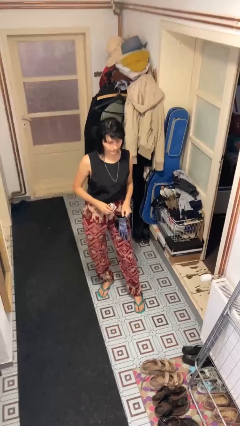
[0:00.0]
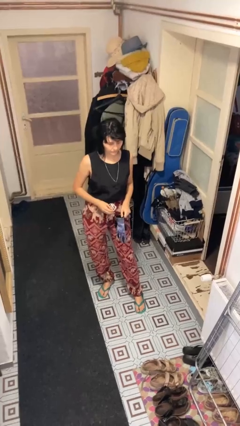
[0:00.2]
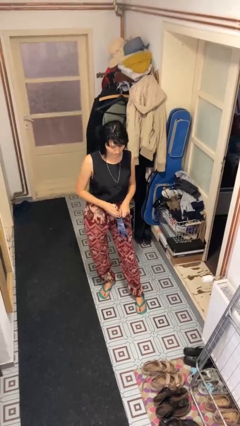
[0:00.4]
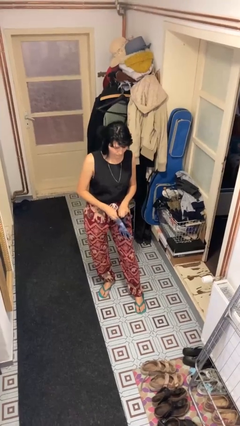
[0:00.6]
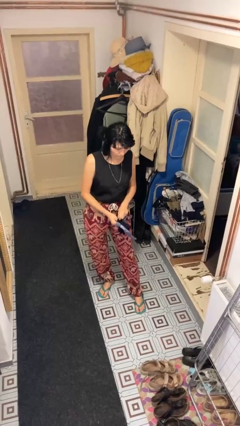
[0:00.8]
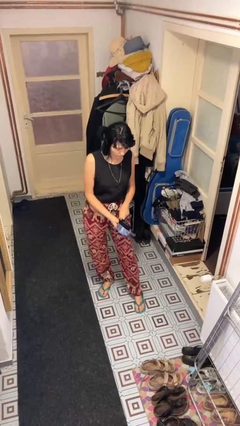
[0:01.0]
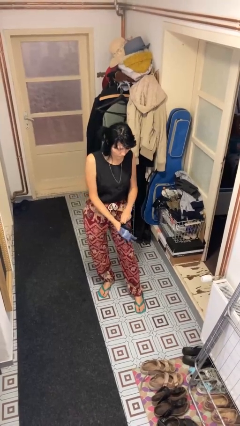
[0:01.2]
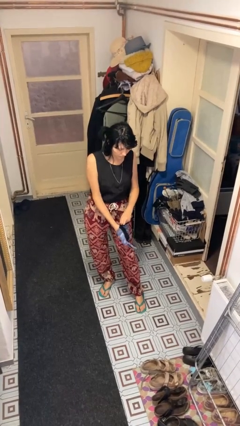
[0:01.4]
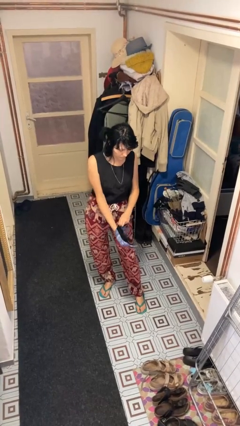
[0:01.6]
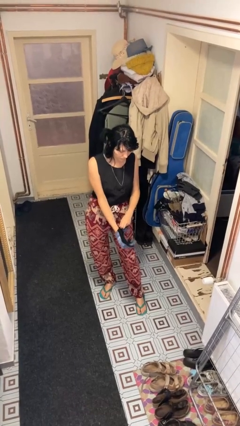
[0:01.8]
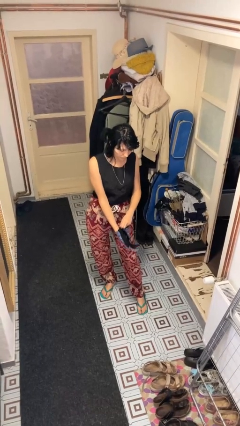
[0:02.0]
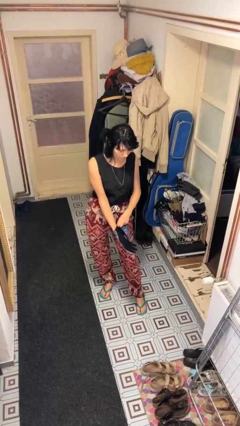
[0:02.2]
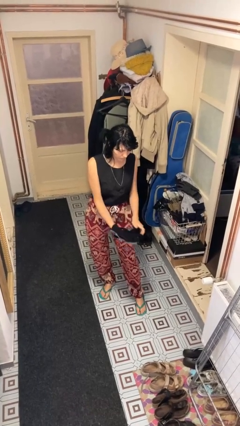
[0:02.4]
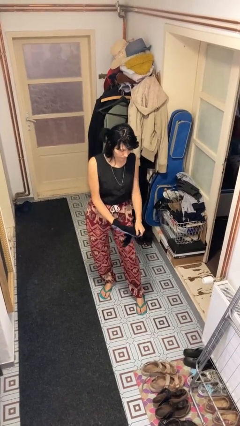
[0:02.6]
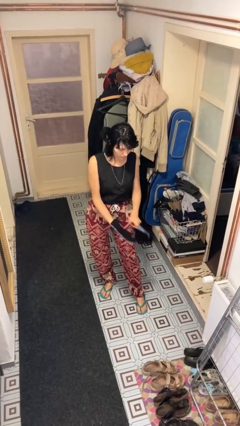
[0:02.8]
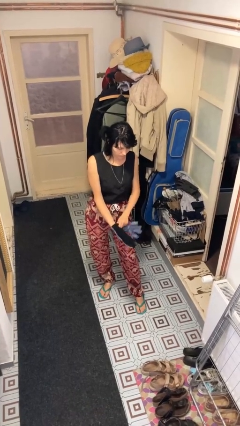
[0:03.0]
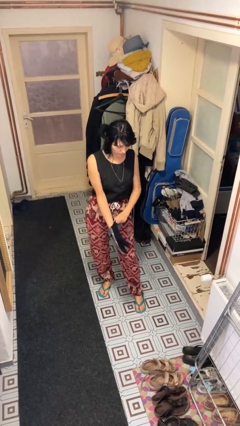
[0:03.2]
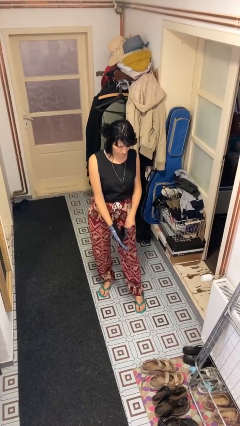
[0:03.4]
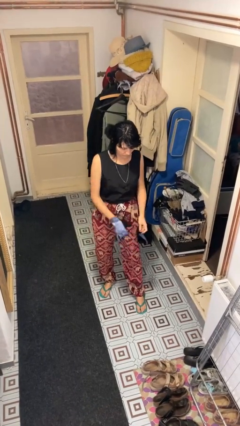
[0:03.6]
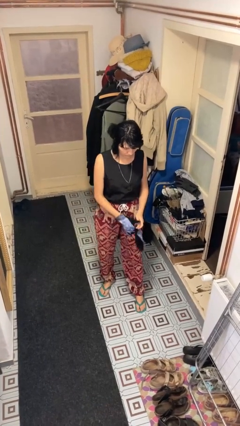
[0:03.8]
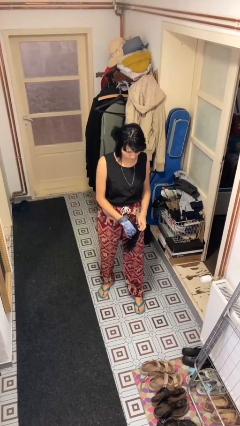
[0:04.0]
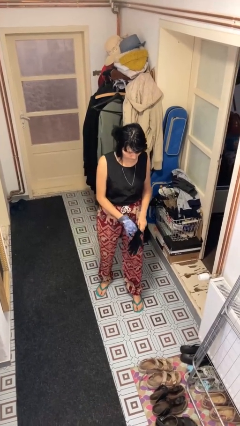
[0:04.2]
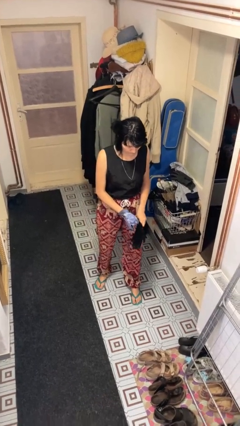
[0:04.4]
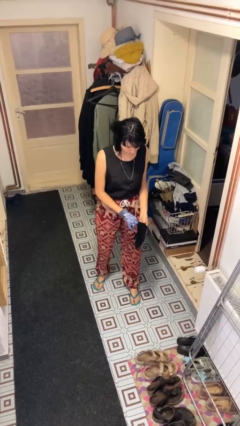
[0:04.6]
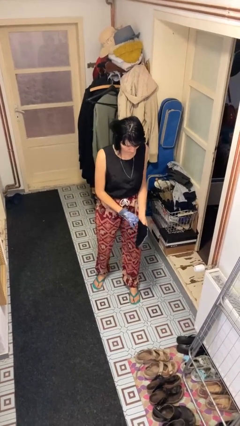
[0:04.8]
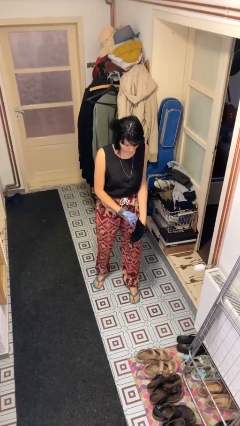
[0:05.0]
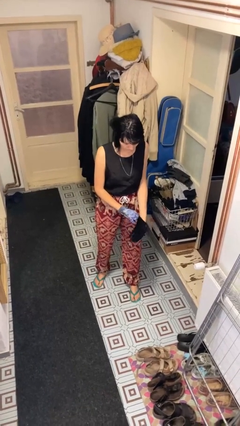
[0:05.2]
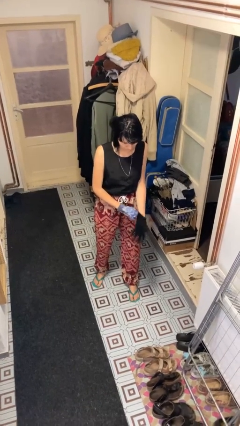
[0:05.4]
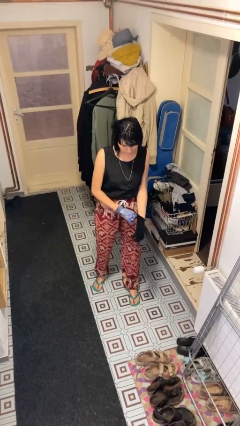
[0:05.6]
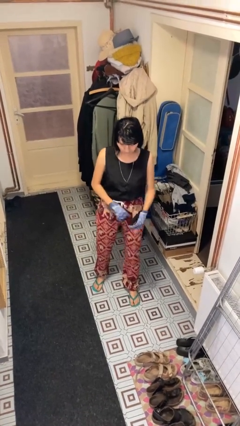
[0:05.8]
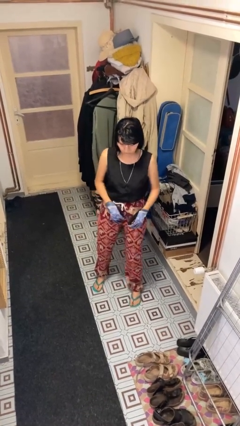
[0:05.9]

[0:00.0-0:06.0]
person puts on gloves

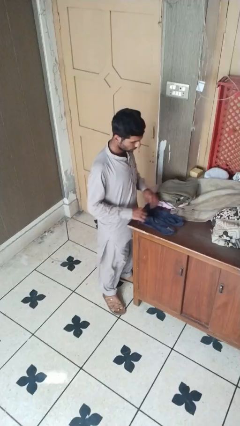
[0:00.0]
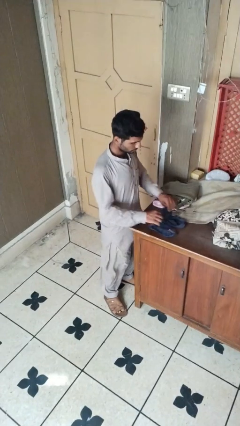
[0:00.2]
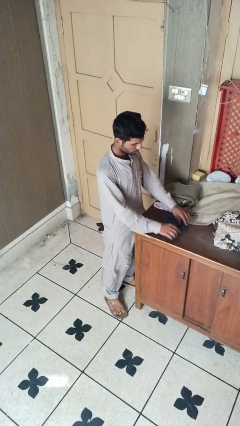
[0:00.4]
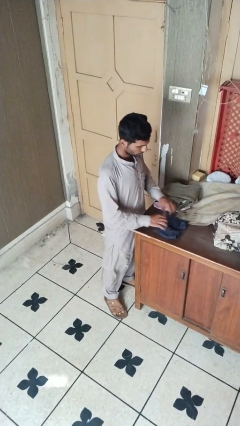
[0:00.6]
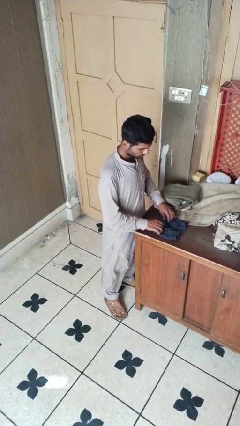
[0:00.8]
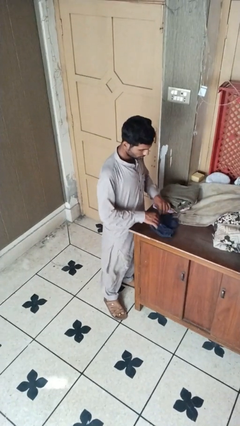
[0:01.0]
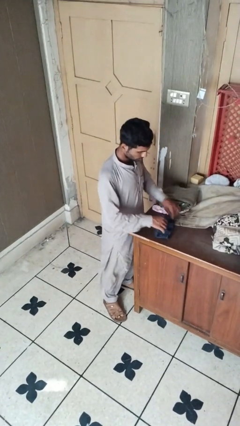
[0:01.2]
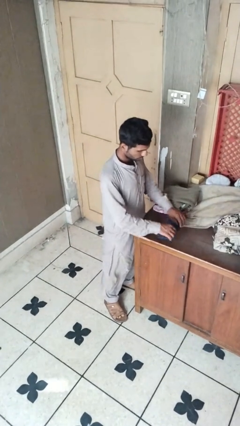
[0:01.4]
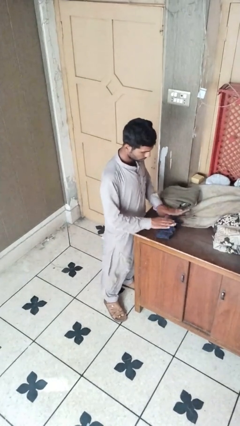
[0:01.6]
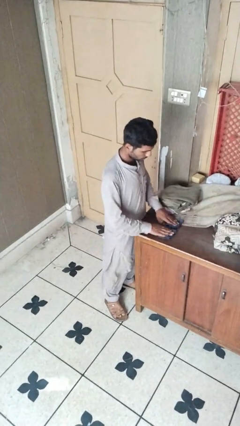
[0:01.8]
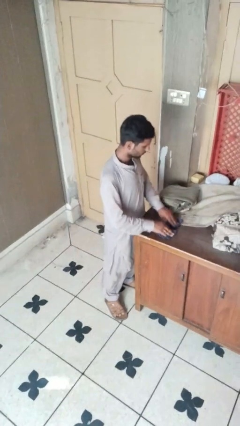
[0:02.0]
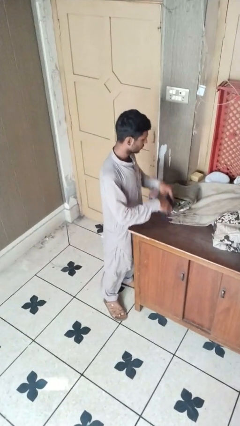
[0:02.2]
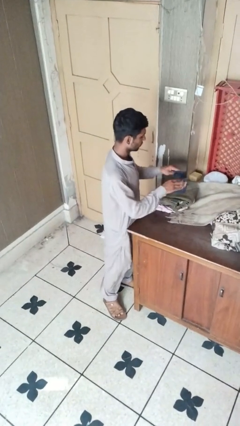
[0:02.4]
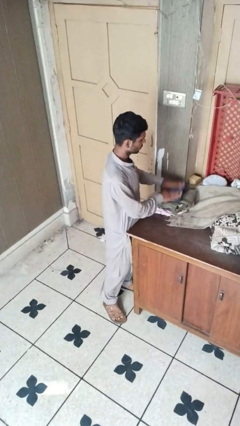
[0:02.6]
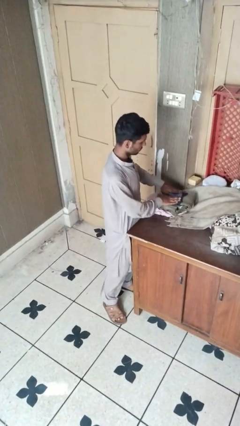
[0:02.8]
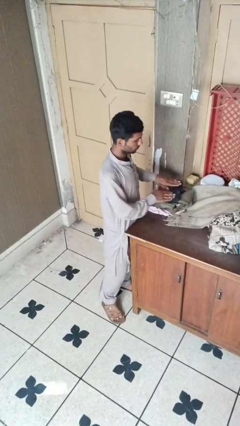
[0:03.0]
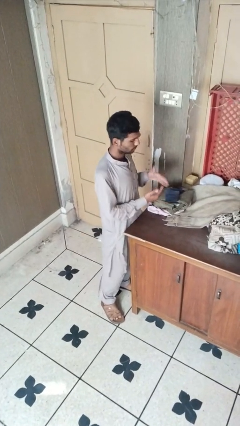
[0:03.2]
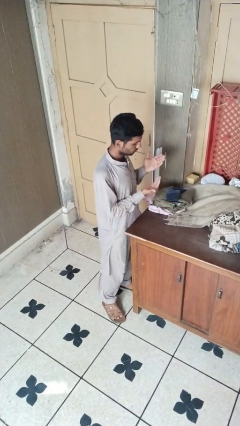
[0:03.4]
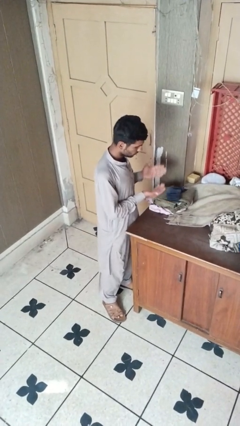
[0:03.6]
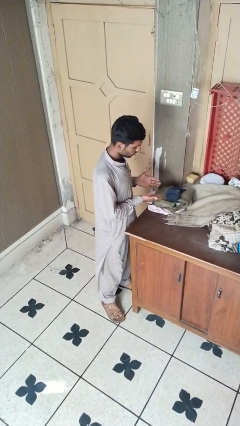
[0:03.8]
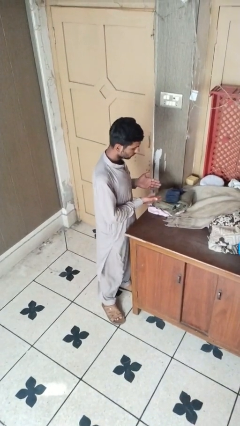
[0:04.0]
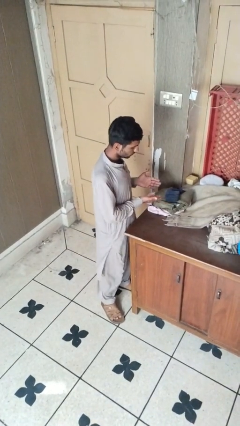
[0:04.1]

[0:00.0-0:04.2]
person folds socks

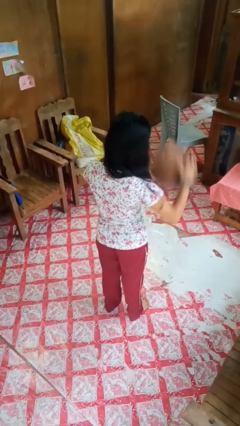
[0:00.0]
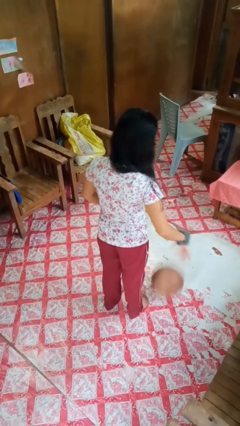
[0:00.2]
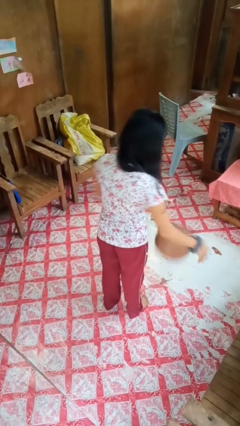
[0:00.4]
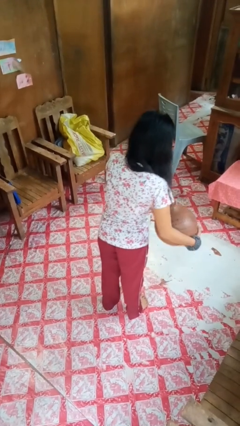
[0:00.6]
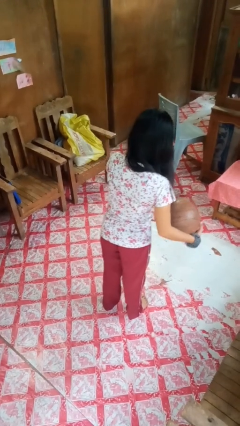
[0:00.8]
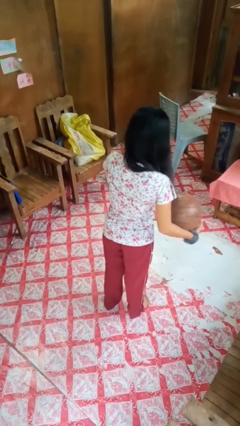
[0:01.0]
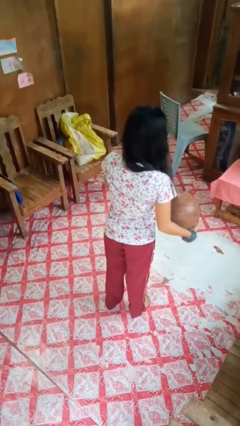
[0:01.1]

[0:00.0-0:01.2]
person bounces ball on floor

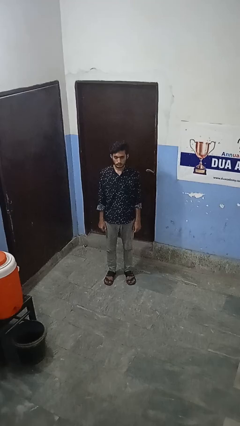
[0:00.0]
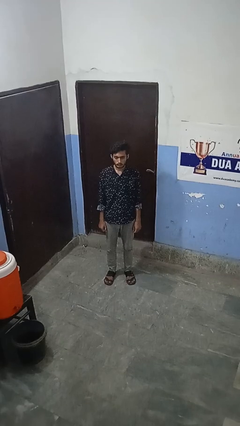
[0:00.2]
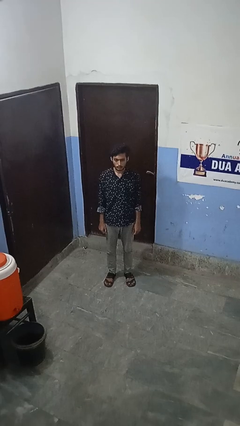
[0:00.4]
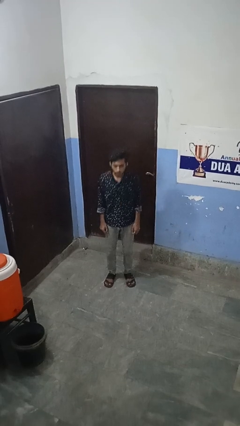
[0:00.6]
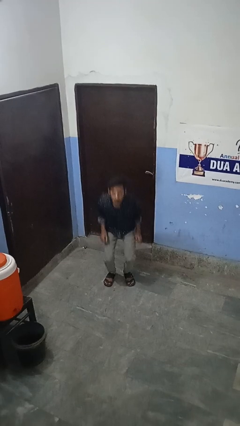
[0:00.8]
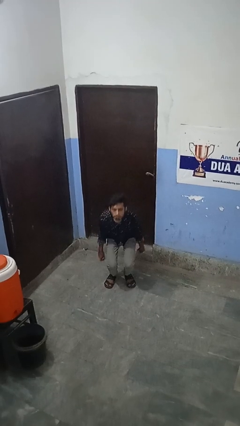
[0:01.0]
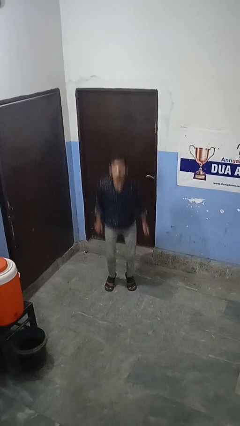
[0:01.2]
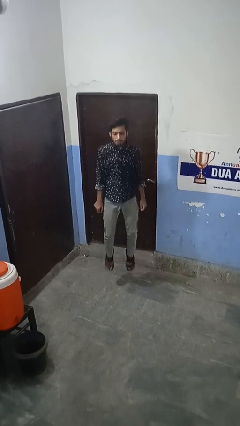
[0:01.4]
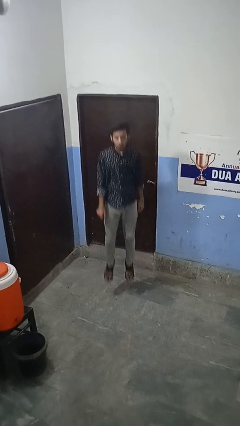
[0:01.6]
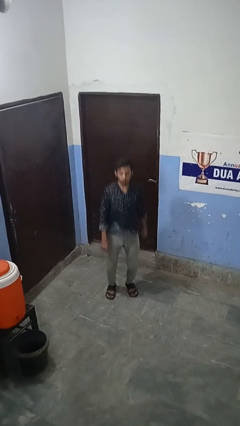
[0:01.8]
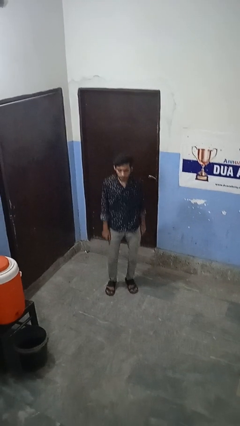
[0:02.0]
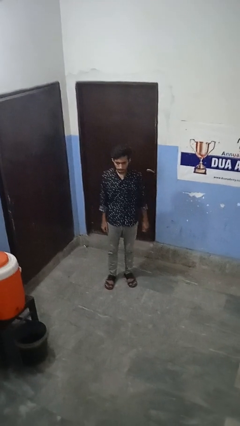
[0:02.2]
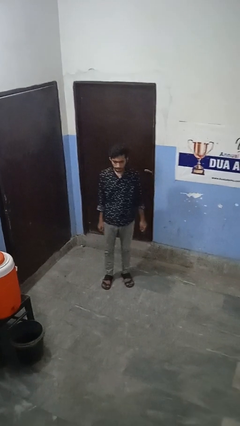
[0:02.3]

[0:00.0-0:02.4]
person jumps

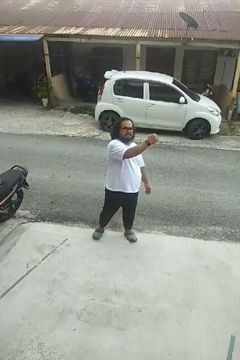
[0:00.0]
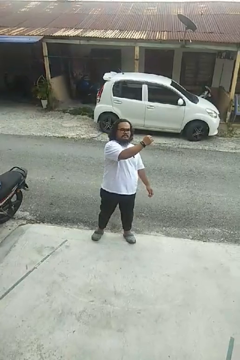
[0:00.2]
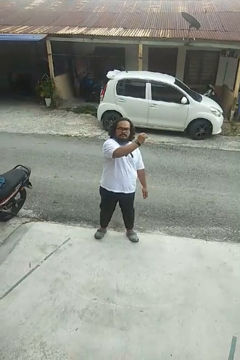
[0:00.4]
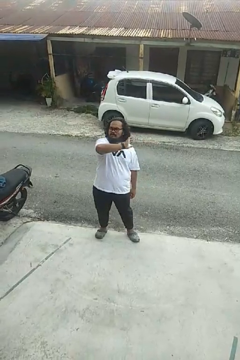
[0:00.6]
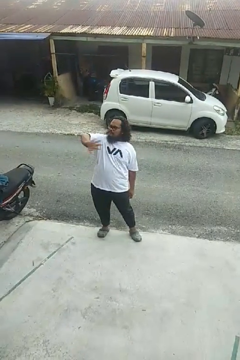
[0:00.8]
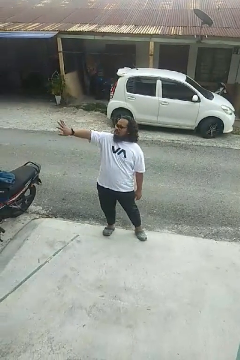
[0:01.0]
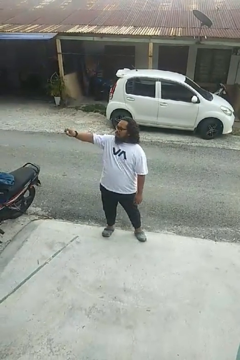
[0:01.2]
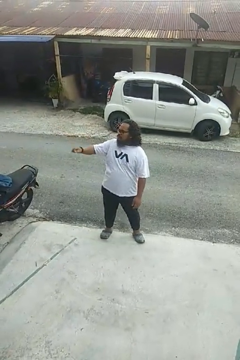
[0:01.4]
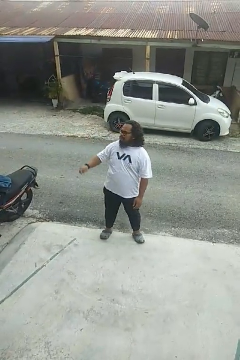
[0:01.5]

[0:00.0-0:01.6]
person gestures swipe right

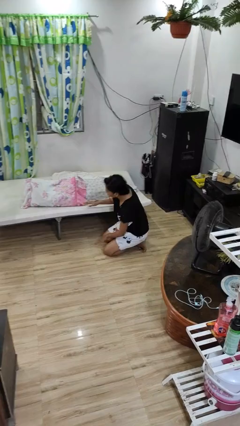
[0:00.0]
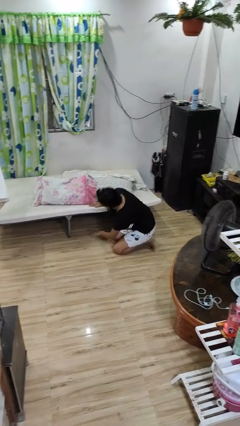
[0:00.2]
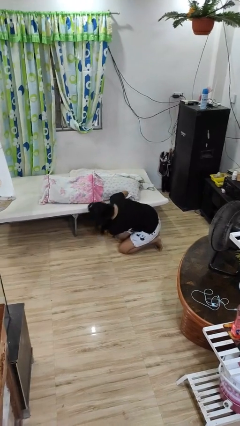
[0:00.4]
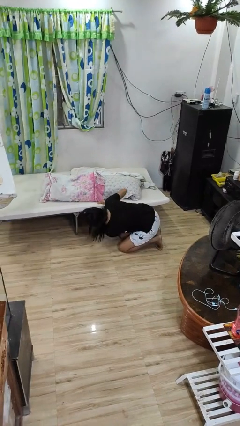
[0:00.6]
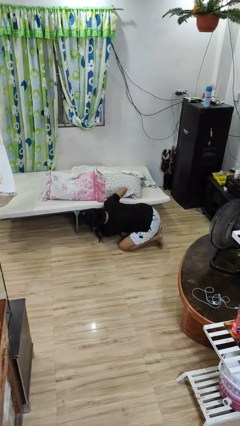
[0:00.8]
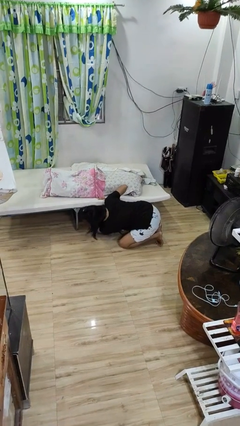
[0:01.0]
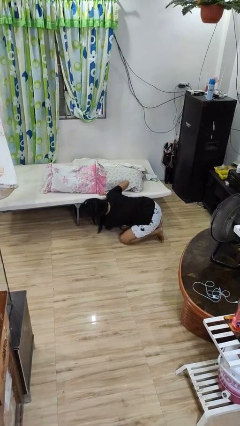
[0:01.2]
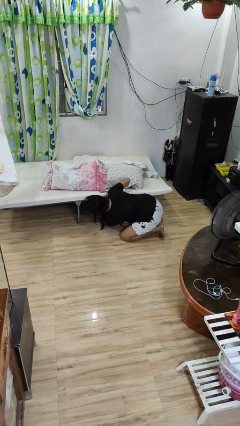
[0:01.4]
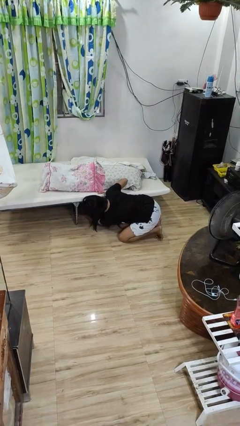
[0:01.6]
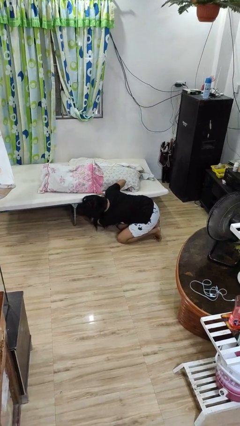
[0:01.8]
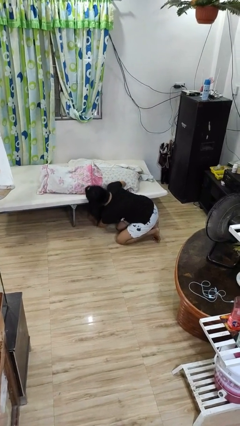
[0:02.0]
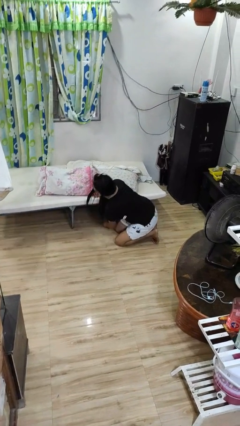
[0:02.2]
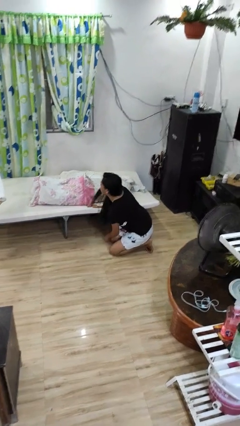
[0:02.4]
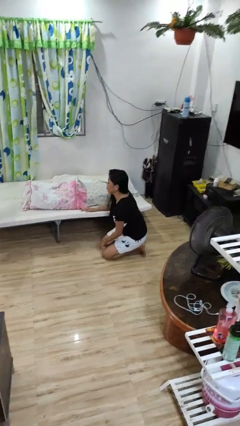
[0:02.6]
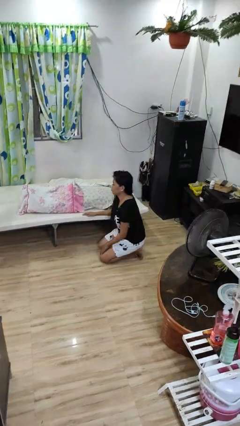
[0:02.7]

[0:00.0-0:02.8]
person searches under bed
